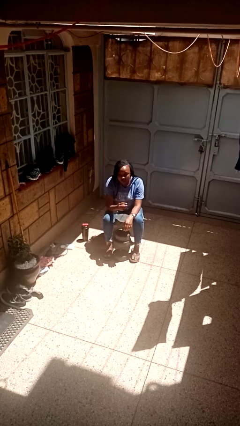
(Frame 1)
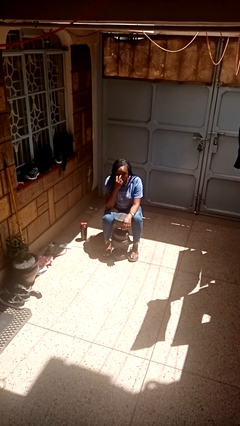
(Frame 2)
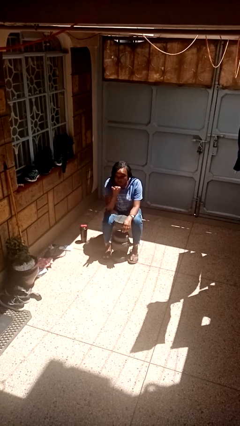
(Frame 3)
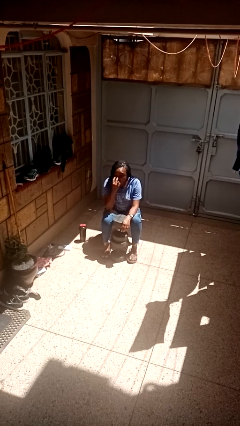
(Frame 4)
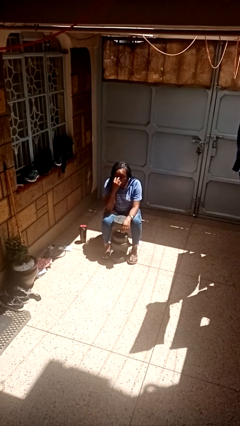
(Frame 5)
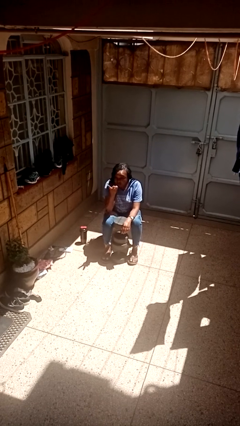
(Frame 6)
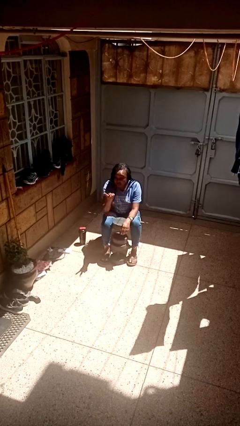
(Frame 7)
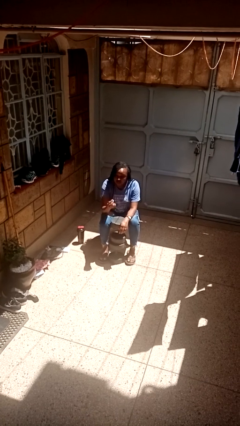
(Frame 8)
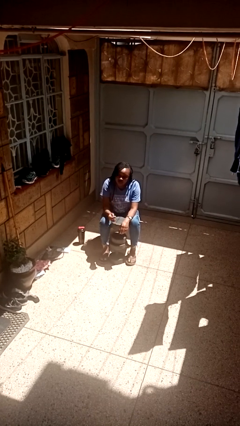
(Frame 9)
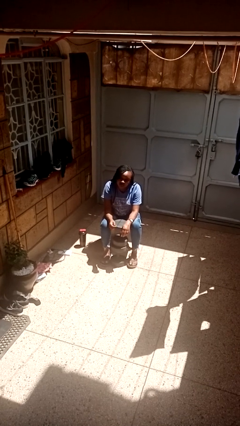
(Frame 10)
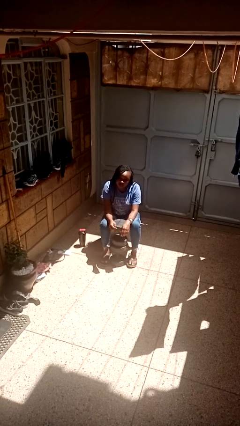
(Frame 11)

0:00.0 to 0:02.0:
person gestures watch closely

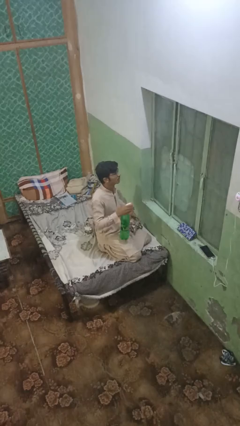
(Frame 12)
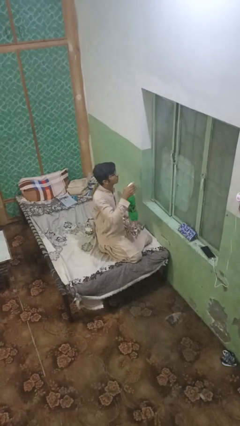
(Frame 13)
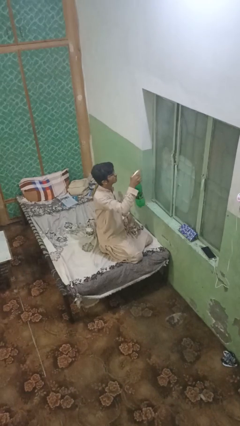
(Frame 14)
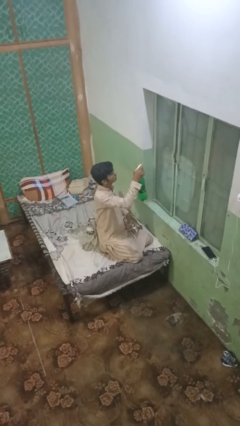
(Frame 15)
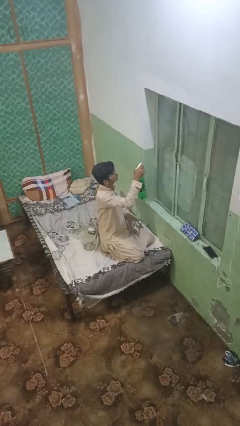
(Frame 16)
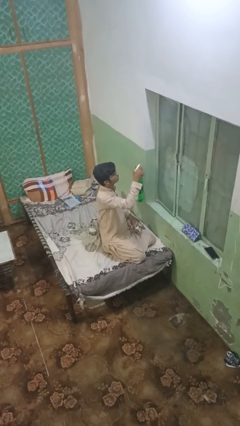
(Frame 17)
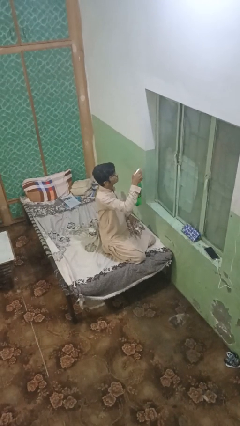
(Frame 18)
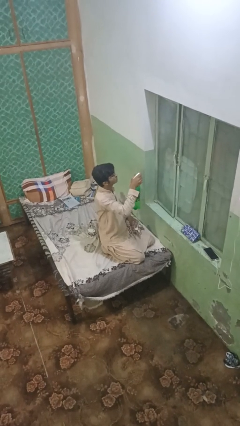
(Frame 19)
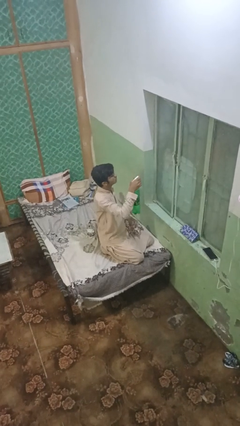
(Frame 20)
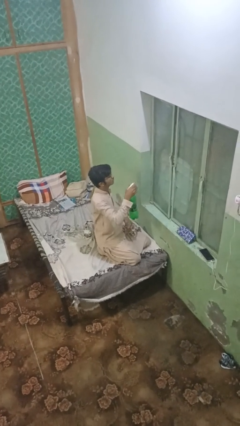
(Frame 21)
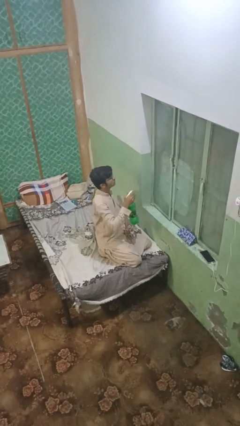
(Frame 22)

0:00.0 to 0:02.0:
person sprays from bottle

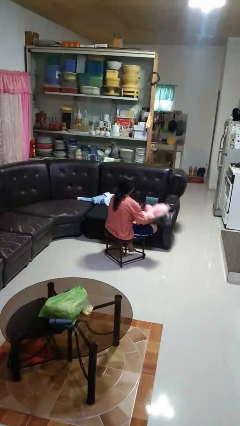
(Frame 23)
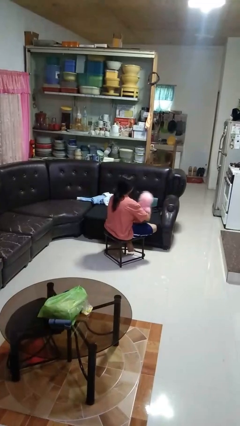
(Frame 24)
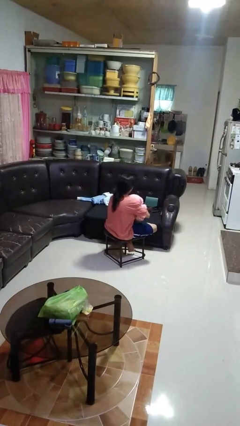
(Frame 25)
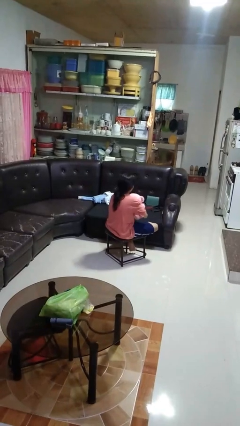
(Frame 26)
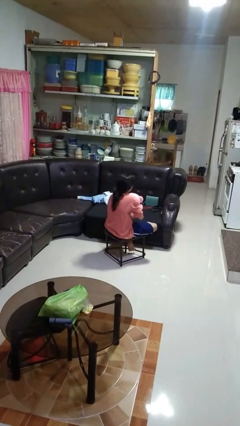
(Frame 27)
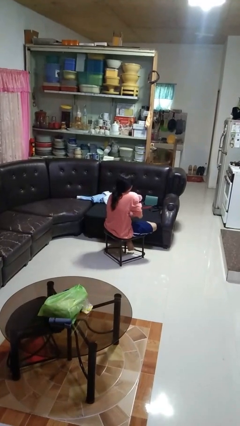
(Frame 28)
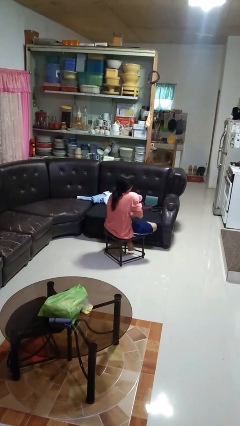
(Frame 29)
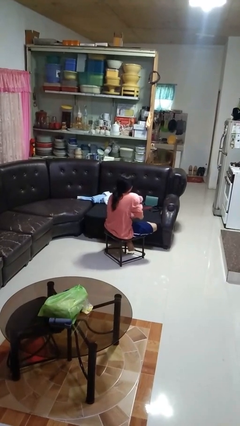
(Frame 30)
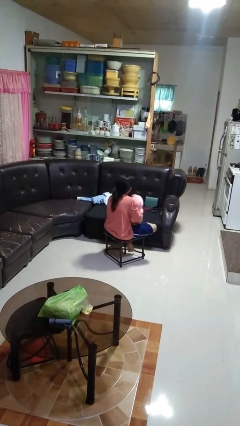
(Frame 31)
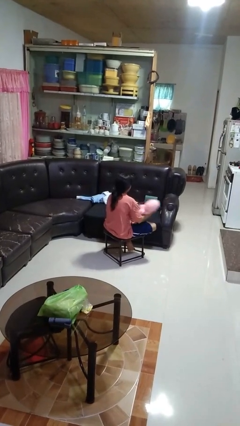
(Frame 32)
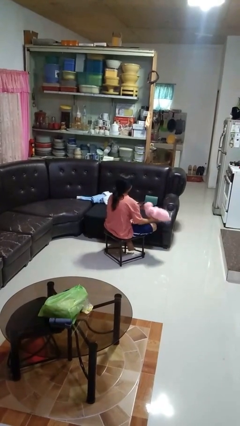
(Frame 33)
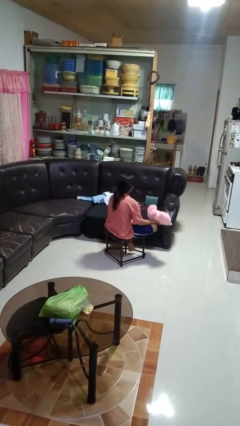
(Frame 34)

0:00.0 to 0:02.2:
person hugs stuffed animal

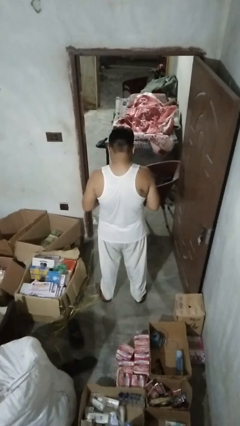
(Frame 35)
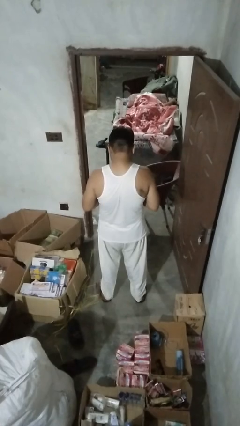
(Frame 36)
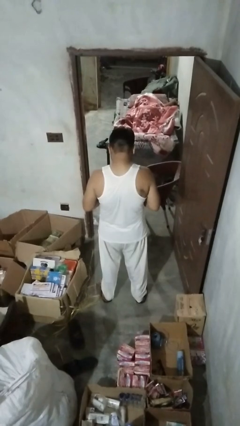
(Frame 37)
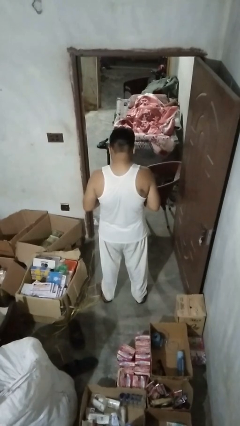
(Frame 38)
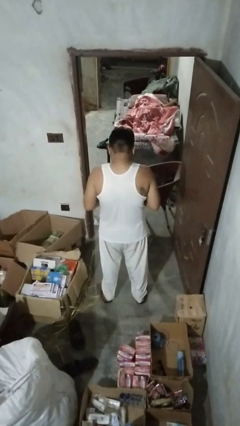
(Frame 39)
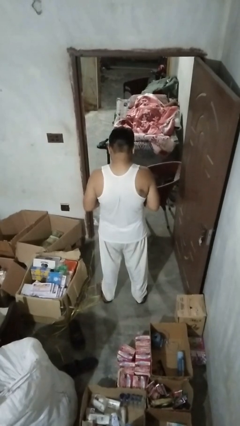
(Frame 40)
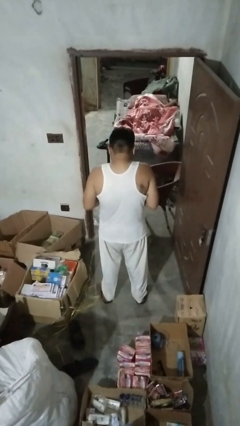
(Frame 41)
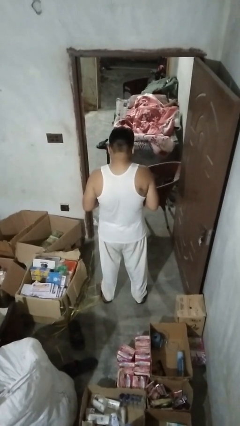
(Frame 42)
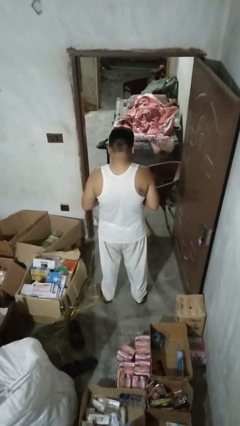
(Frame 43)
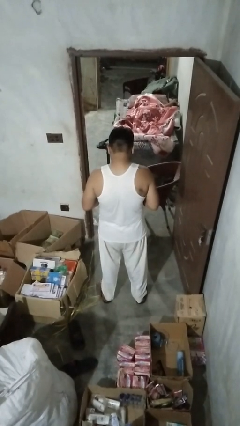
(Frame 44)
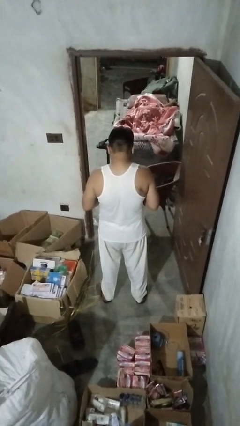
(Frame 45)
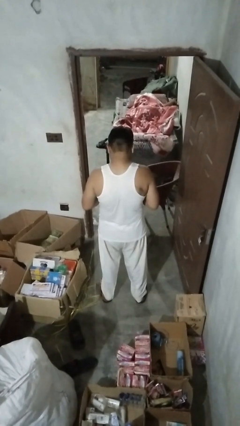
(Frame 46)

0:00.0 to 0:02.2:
person shrugs

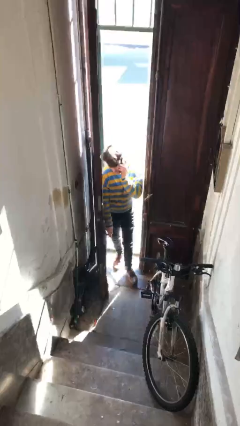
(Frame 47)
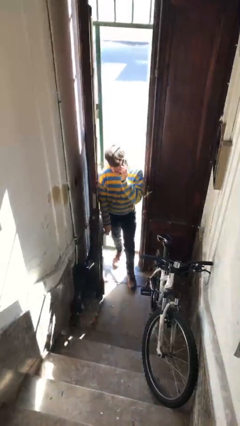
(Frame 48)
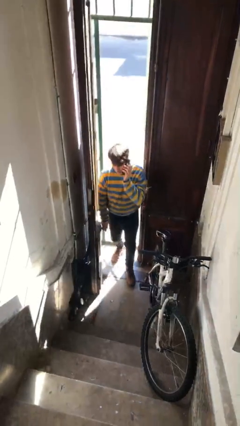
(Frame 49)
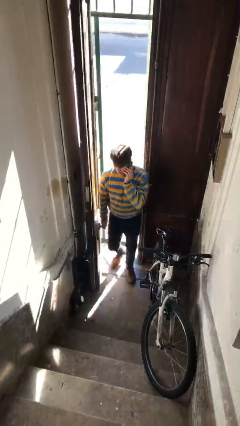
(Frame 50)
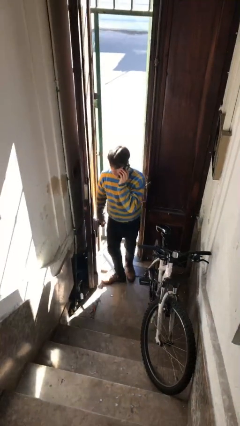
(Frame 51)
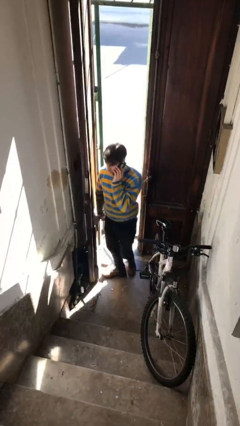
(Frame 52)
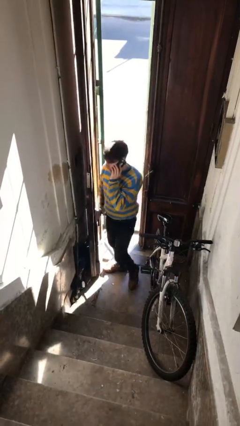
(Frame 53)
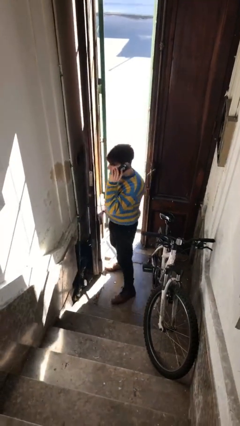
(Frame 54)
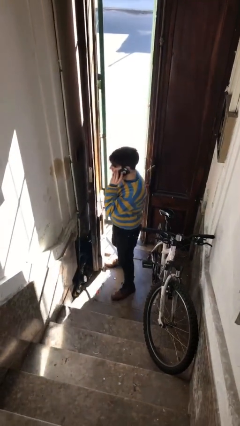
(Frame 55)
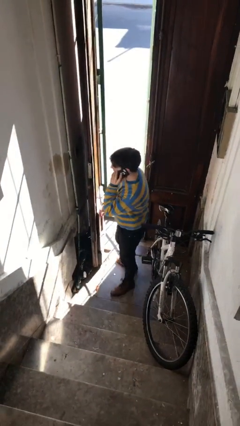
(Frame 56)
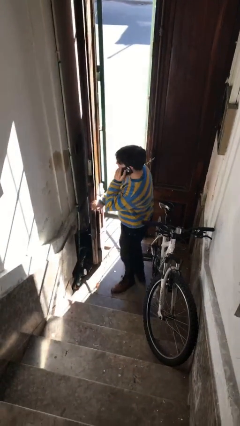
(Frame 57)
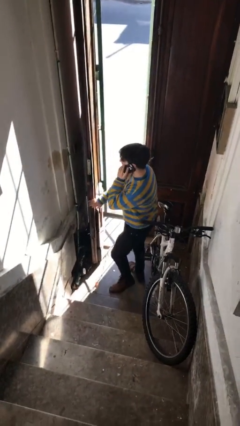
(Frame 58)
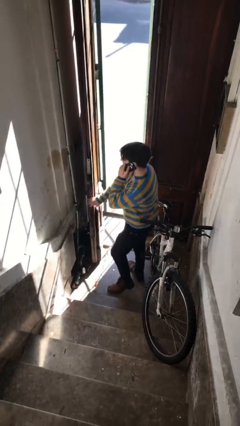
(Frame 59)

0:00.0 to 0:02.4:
person enters scene through structure

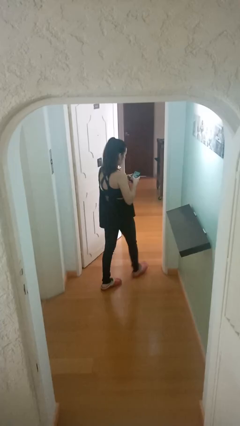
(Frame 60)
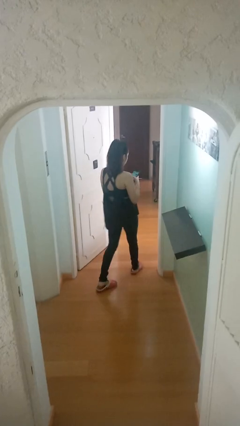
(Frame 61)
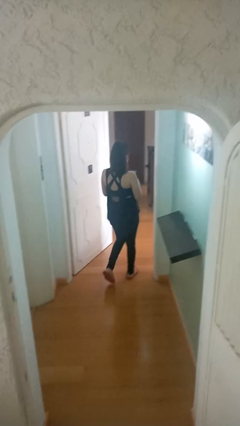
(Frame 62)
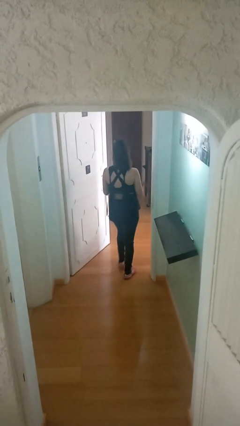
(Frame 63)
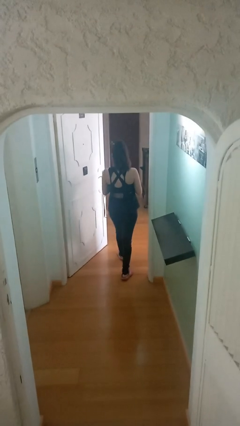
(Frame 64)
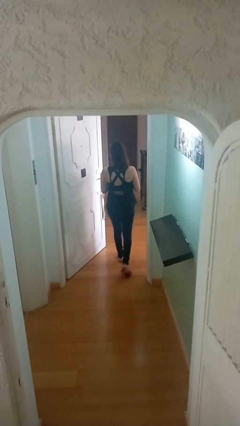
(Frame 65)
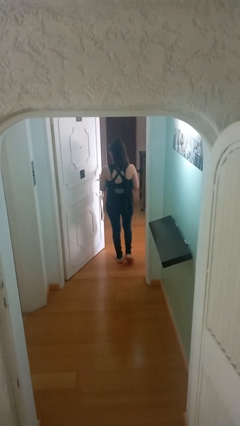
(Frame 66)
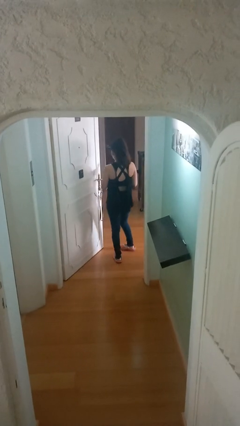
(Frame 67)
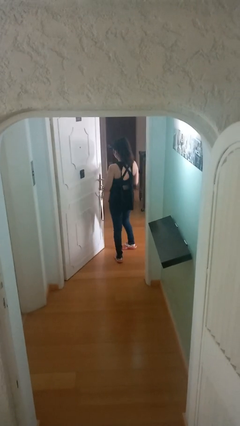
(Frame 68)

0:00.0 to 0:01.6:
person exits scene through structure

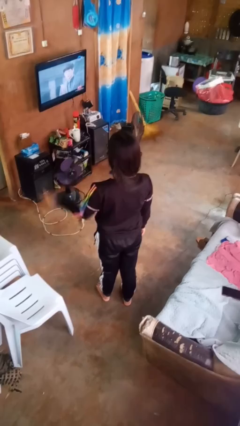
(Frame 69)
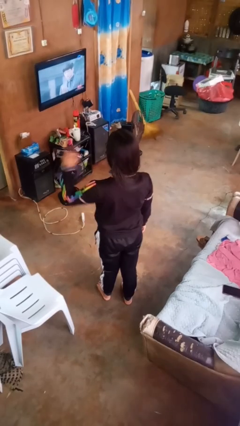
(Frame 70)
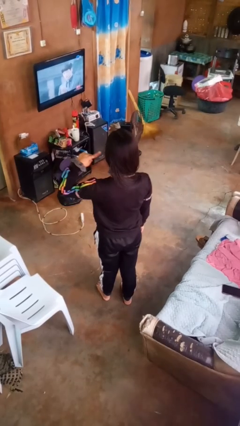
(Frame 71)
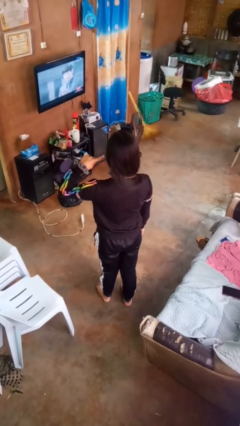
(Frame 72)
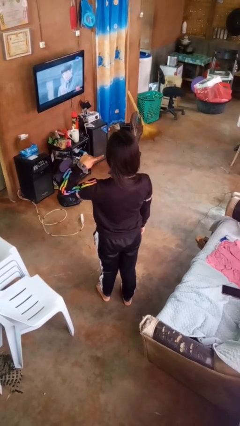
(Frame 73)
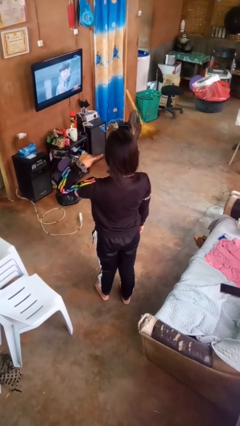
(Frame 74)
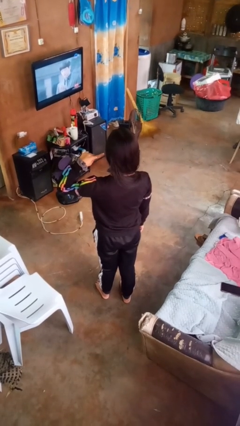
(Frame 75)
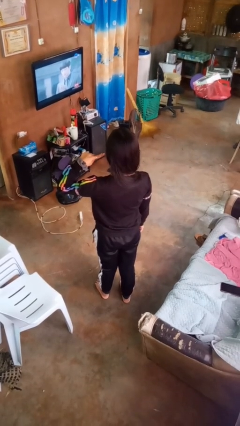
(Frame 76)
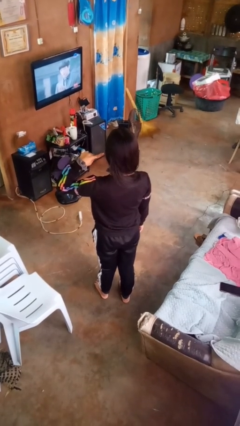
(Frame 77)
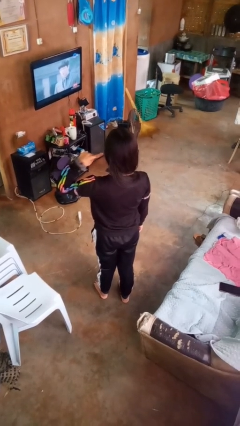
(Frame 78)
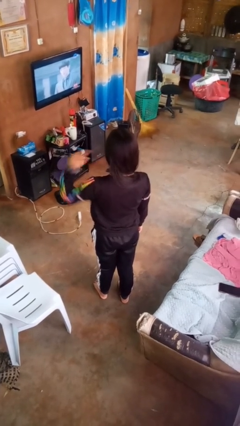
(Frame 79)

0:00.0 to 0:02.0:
person gestures listen closely

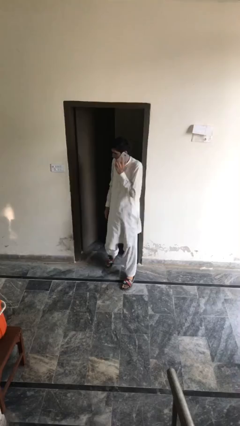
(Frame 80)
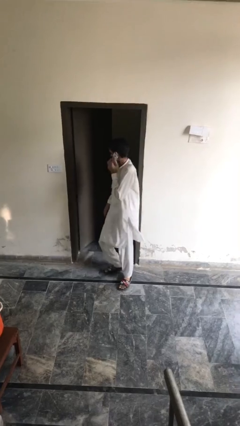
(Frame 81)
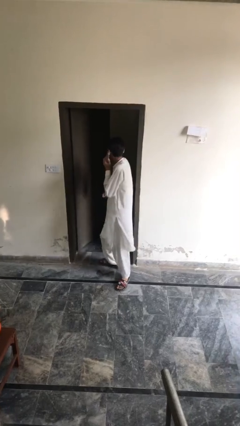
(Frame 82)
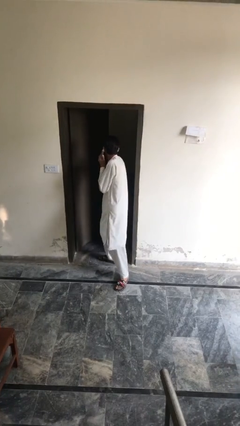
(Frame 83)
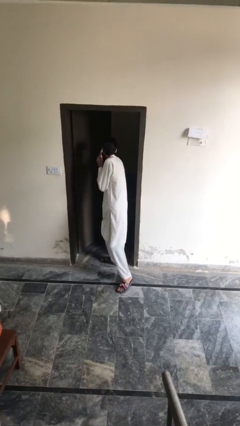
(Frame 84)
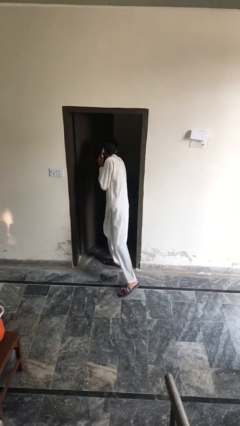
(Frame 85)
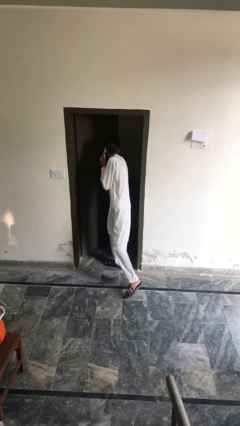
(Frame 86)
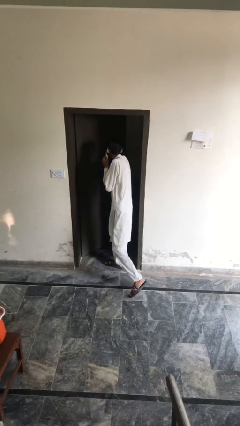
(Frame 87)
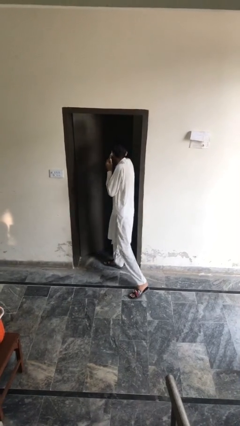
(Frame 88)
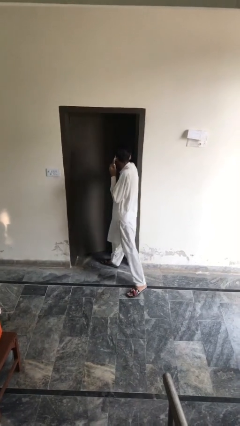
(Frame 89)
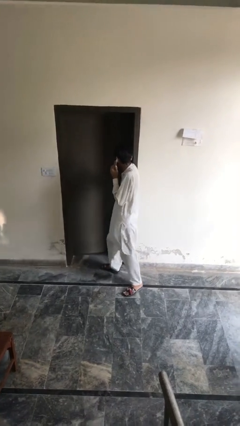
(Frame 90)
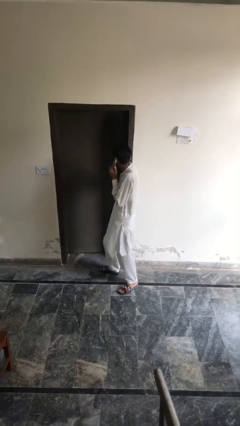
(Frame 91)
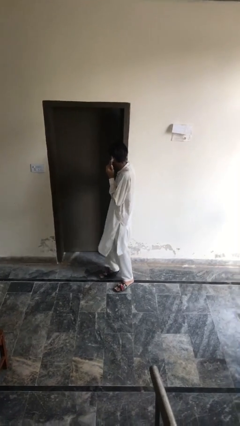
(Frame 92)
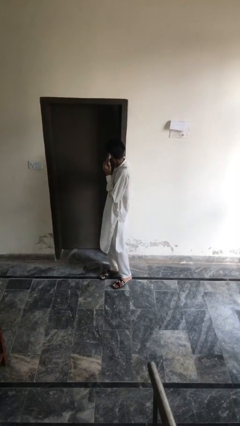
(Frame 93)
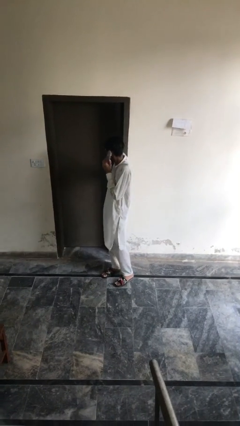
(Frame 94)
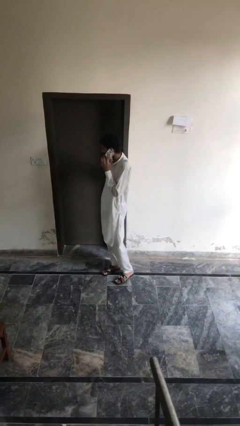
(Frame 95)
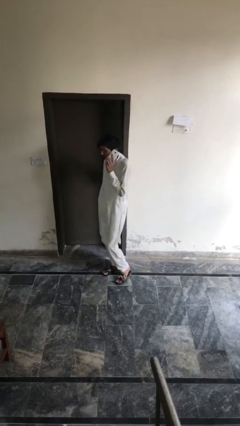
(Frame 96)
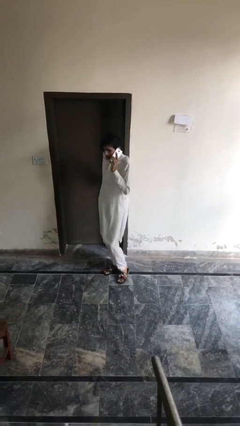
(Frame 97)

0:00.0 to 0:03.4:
person closes facility door
